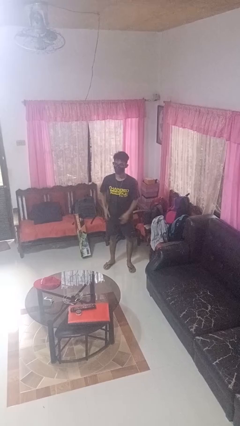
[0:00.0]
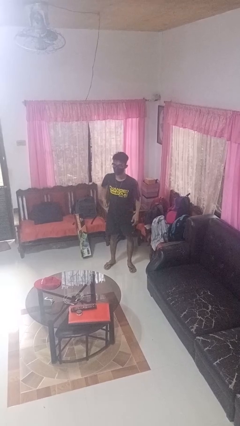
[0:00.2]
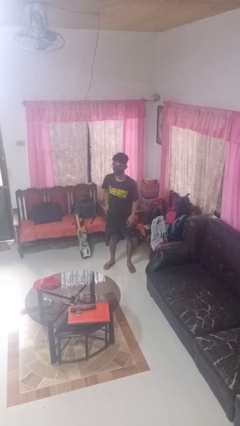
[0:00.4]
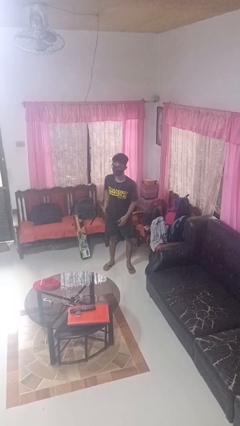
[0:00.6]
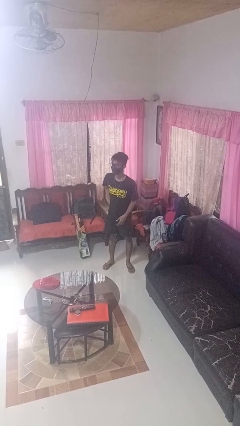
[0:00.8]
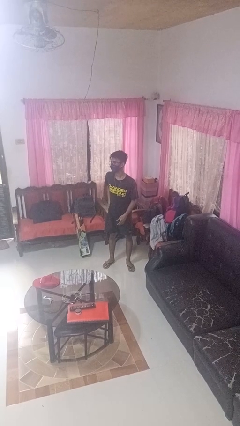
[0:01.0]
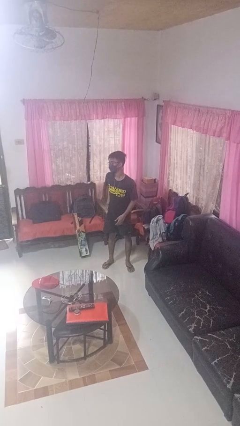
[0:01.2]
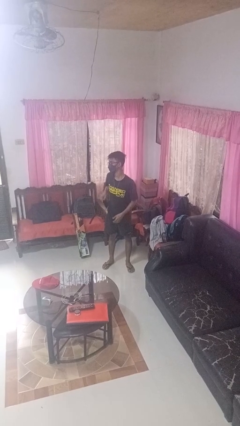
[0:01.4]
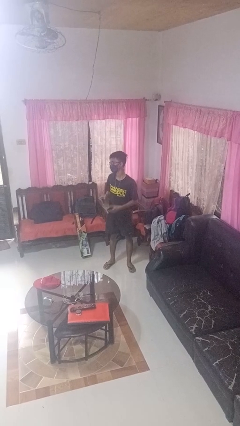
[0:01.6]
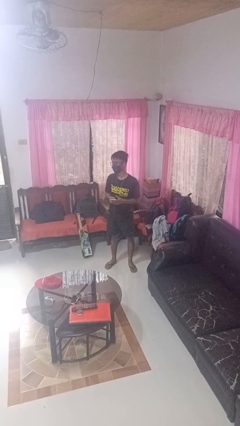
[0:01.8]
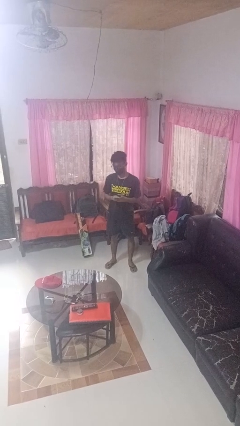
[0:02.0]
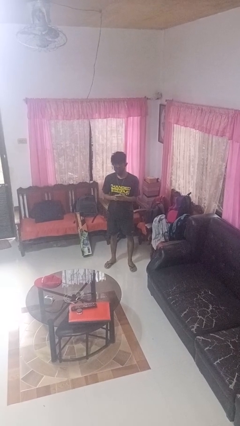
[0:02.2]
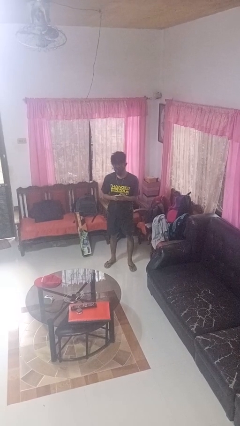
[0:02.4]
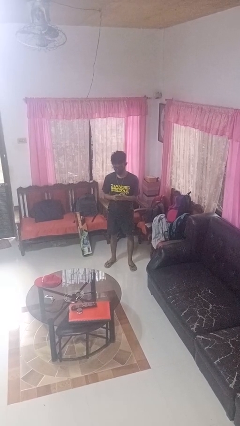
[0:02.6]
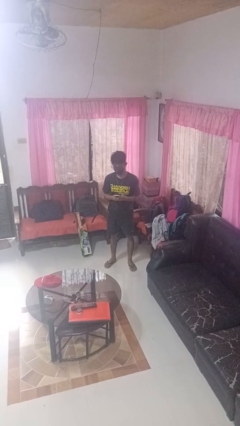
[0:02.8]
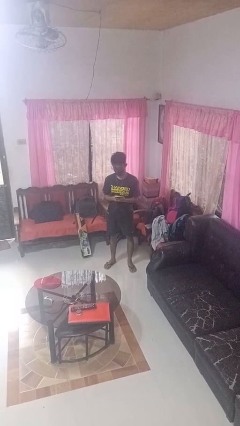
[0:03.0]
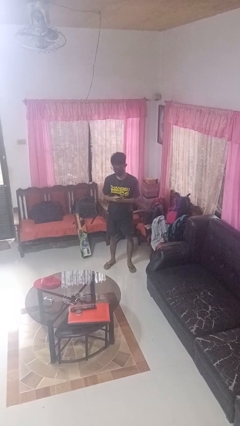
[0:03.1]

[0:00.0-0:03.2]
person takes phone from pocket

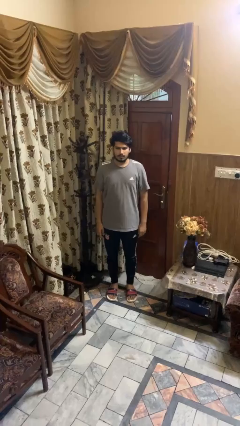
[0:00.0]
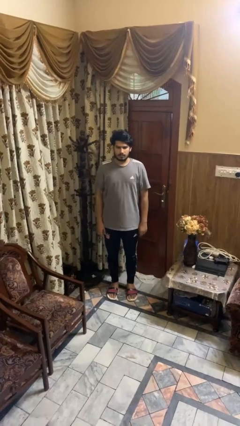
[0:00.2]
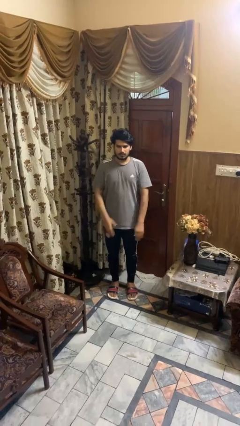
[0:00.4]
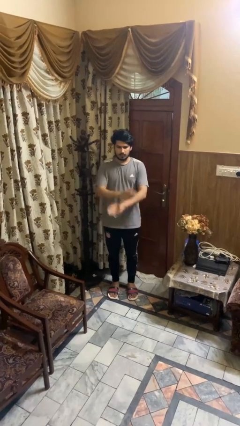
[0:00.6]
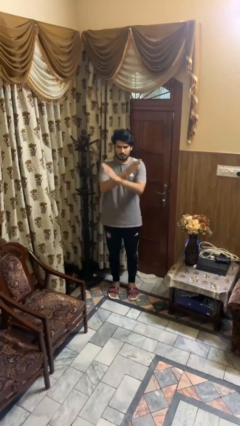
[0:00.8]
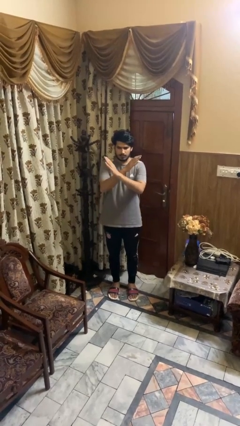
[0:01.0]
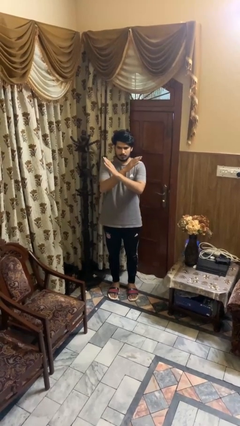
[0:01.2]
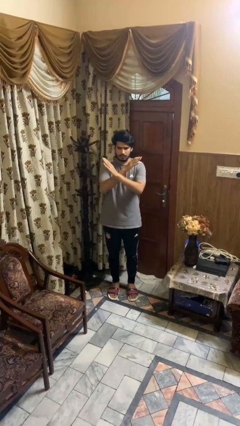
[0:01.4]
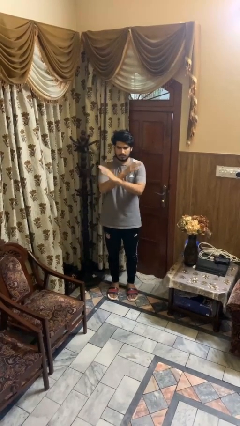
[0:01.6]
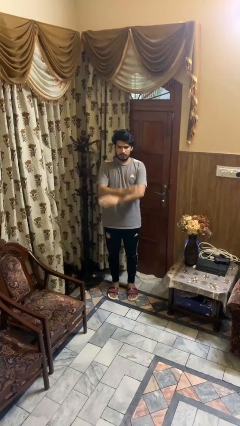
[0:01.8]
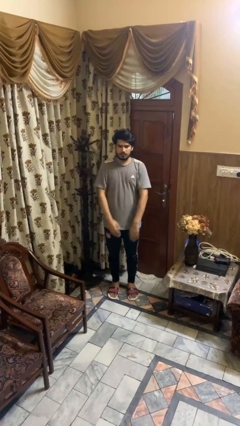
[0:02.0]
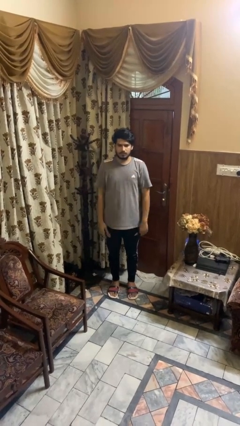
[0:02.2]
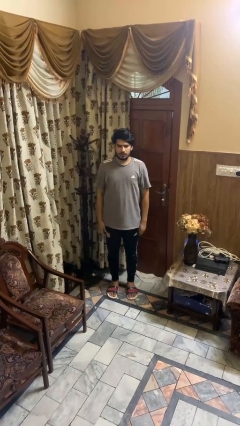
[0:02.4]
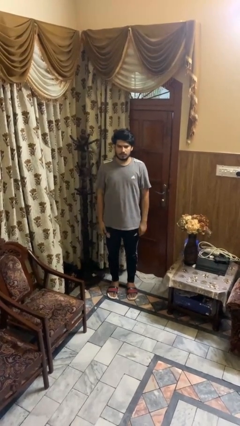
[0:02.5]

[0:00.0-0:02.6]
person gestures arms x

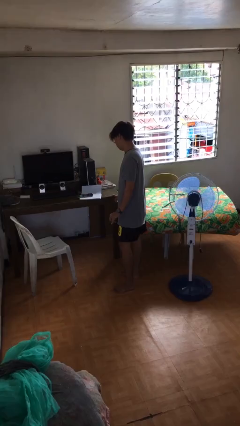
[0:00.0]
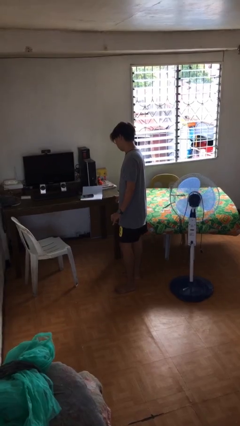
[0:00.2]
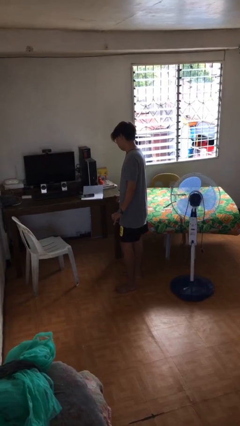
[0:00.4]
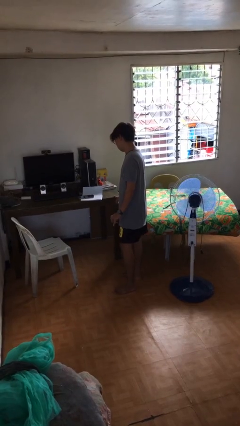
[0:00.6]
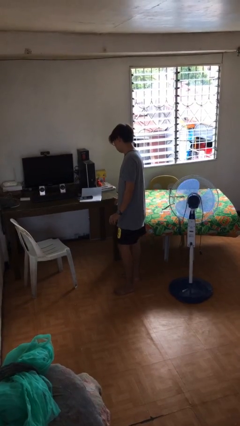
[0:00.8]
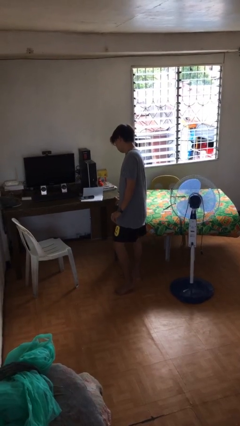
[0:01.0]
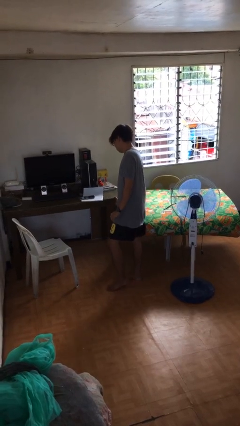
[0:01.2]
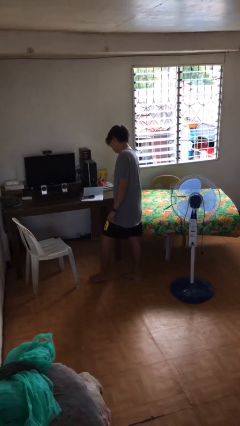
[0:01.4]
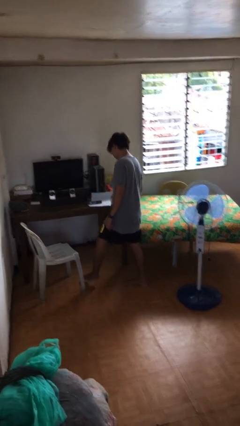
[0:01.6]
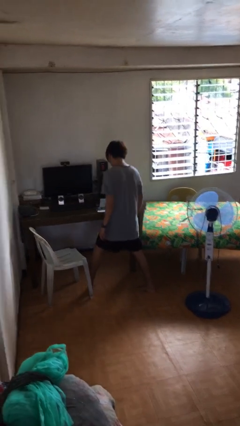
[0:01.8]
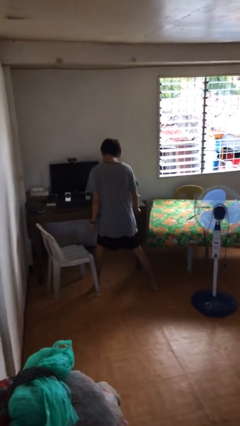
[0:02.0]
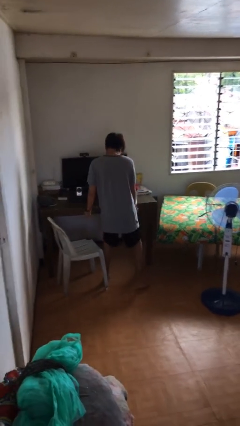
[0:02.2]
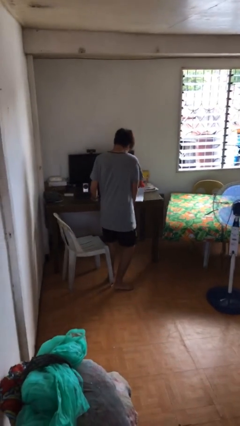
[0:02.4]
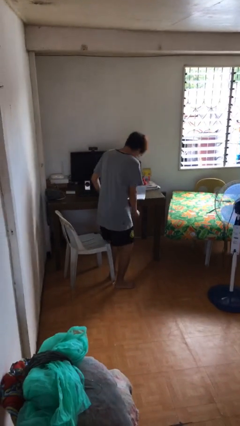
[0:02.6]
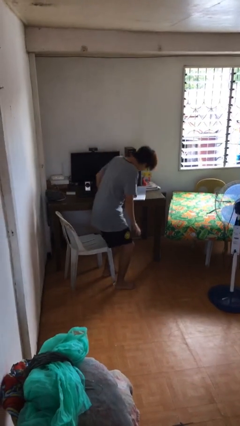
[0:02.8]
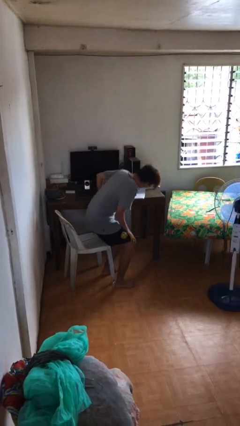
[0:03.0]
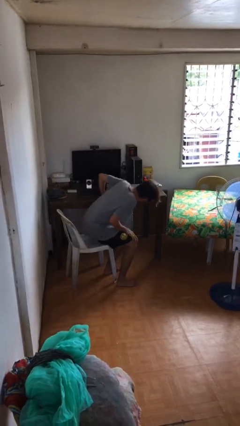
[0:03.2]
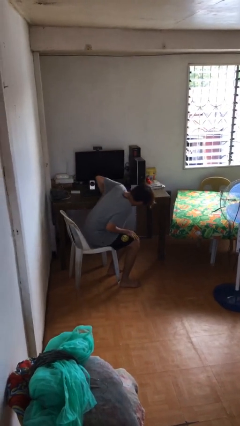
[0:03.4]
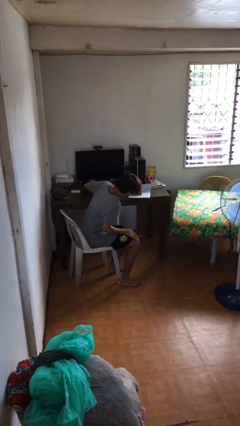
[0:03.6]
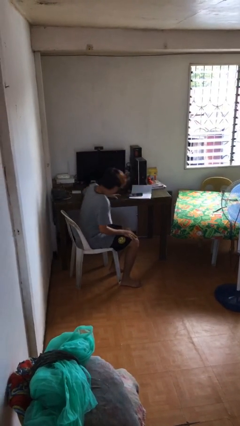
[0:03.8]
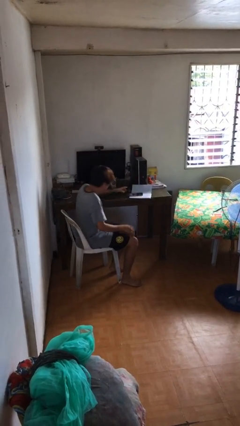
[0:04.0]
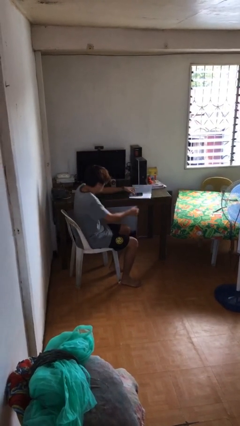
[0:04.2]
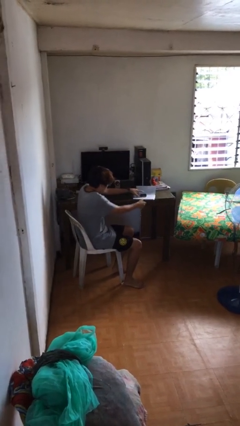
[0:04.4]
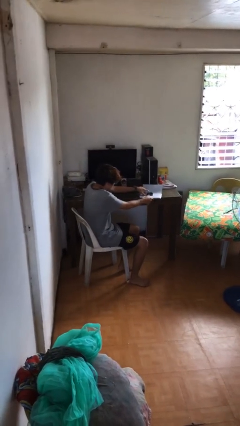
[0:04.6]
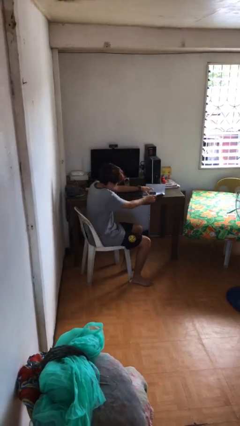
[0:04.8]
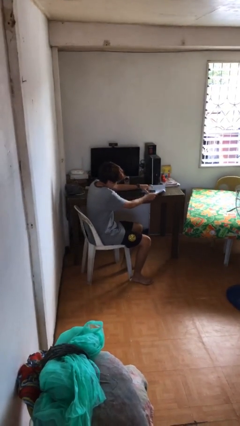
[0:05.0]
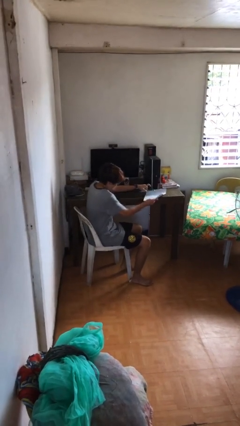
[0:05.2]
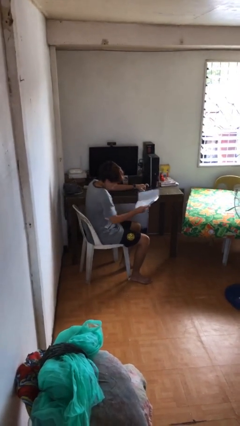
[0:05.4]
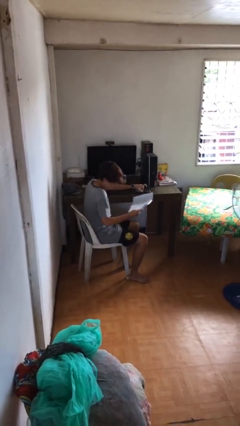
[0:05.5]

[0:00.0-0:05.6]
person sits down

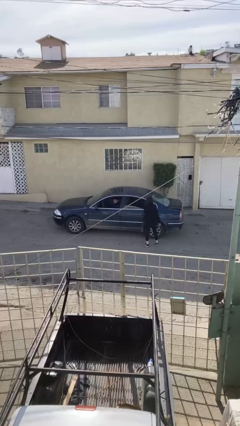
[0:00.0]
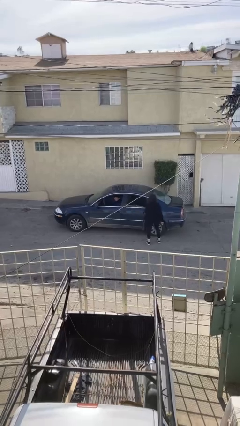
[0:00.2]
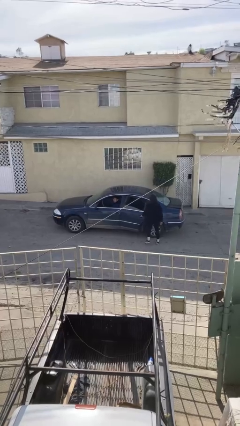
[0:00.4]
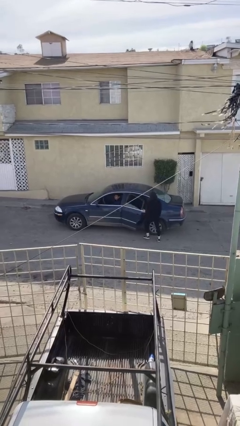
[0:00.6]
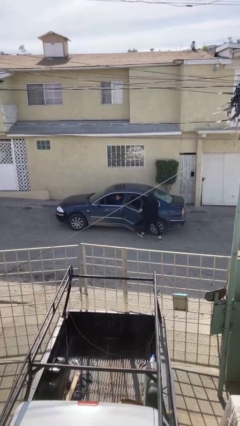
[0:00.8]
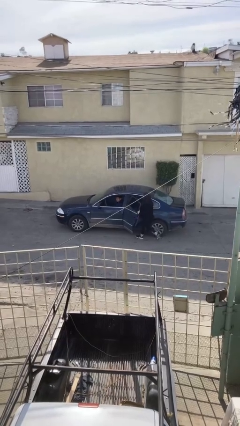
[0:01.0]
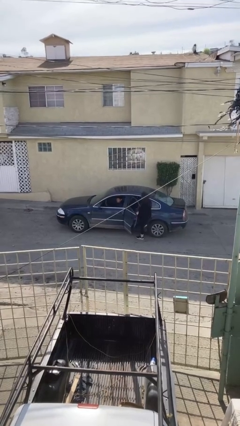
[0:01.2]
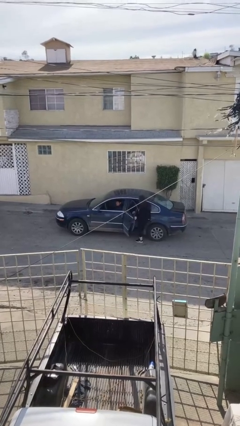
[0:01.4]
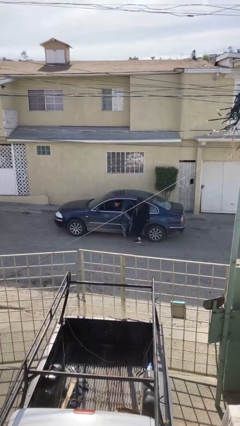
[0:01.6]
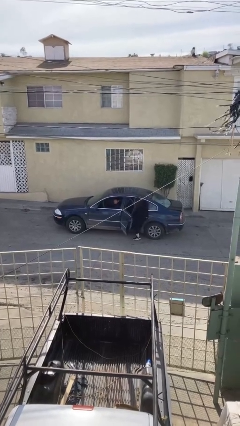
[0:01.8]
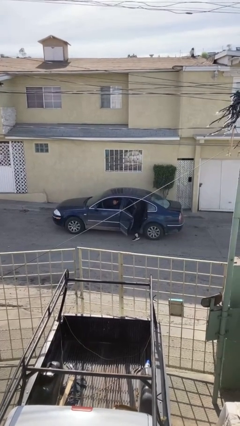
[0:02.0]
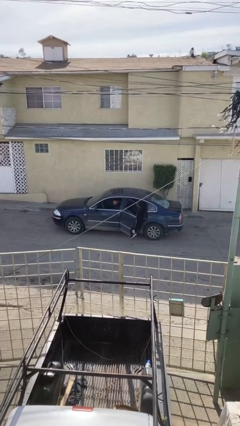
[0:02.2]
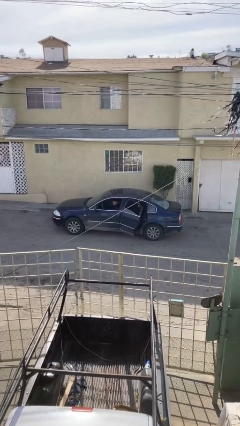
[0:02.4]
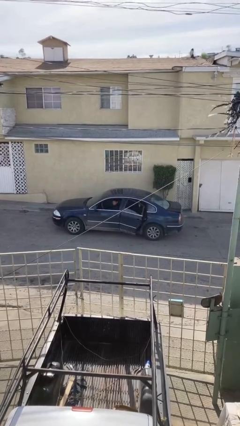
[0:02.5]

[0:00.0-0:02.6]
car picks up person

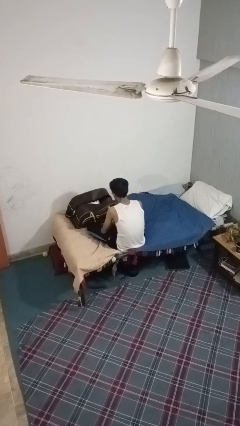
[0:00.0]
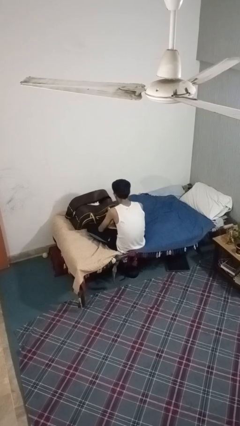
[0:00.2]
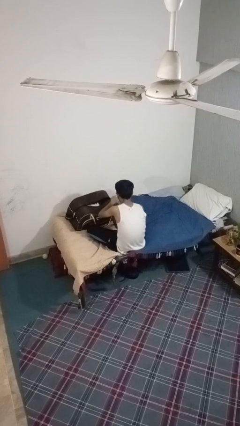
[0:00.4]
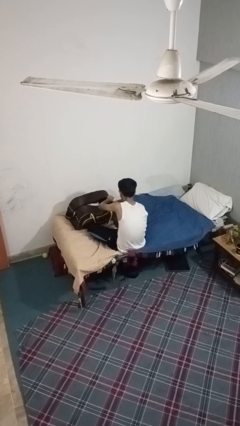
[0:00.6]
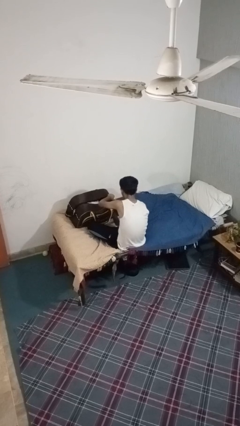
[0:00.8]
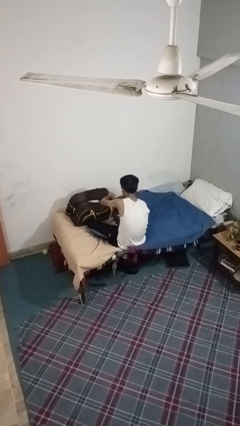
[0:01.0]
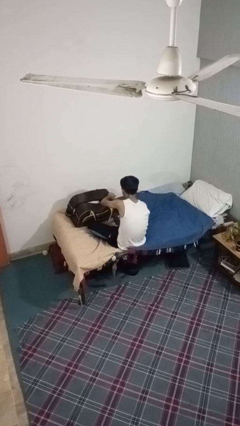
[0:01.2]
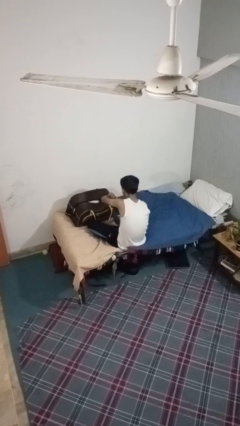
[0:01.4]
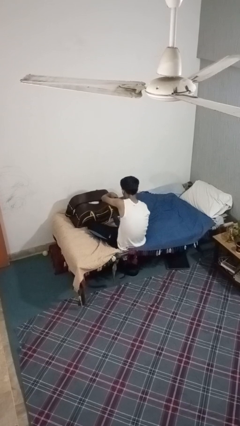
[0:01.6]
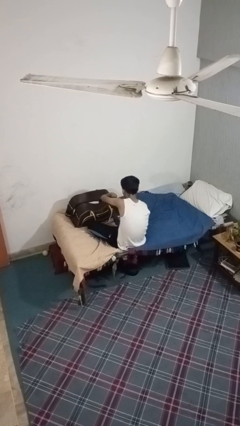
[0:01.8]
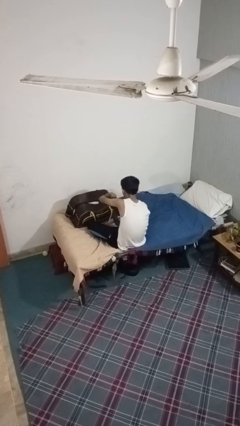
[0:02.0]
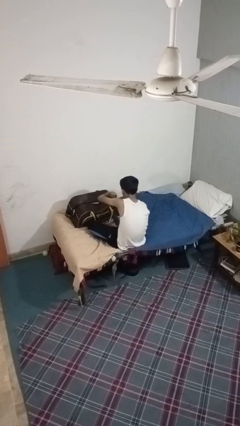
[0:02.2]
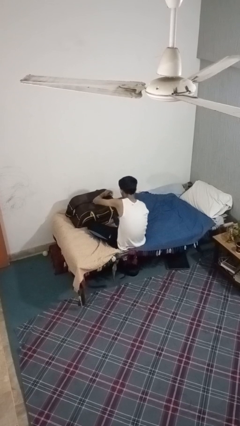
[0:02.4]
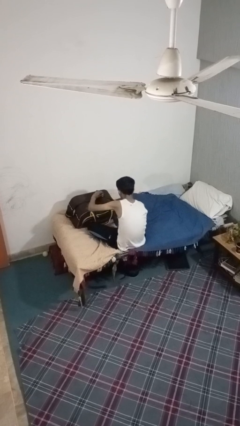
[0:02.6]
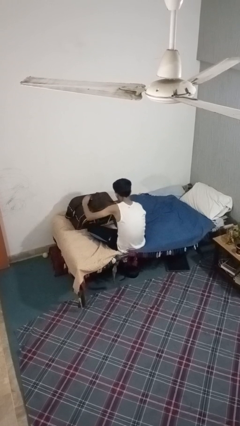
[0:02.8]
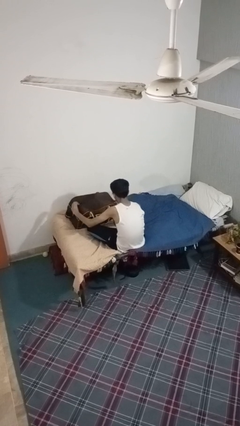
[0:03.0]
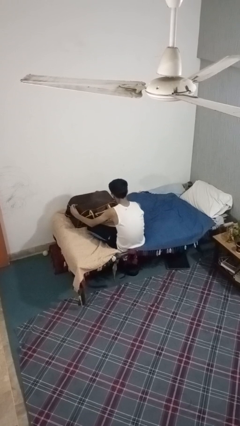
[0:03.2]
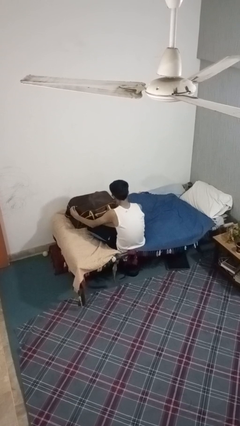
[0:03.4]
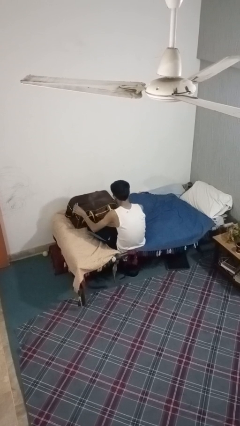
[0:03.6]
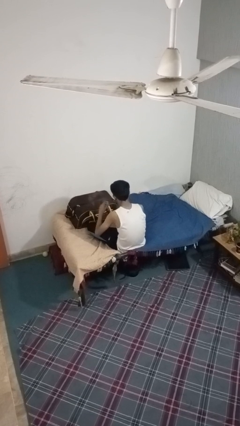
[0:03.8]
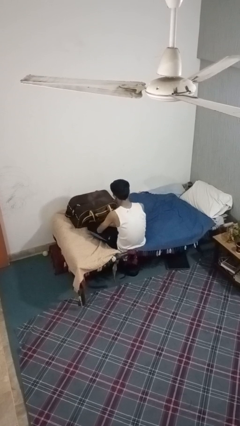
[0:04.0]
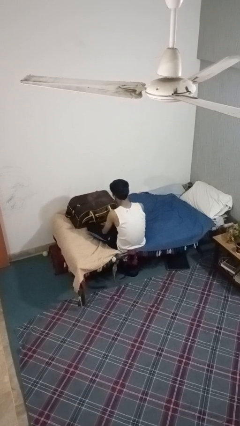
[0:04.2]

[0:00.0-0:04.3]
person closes suitcase
